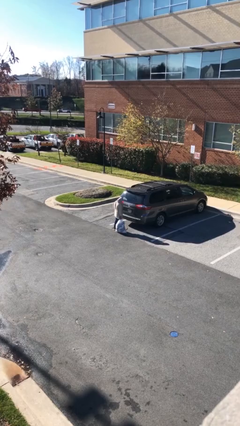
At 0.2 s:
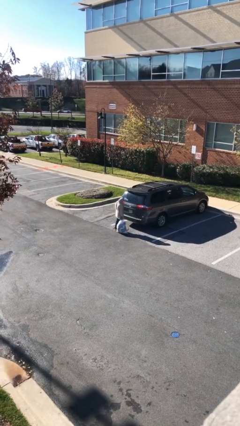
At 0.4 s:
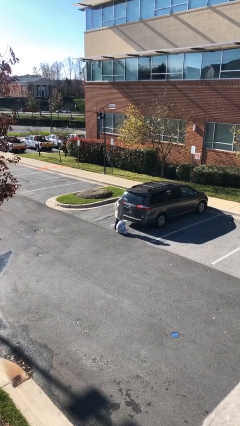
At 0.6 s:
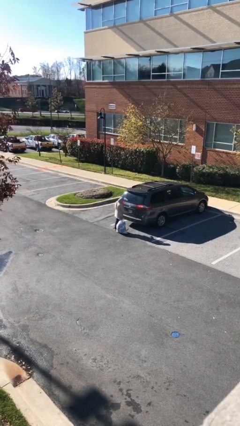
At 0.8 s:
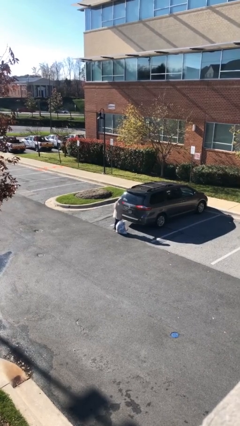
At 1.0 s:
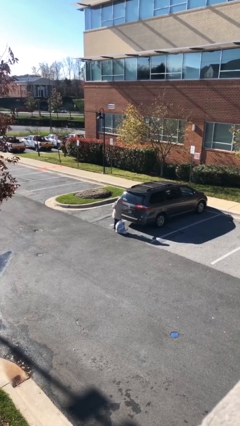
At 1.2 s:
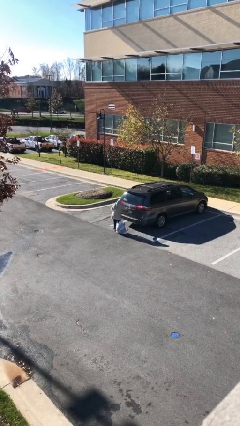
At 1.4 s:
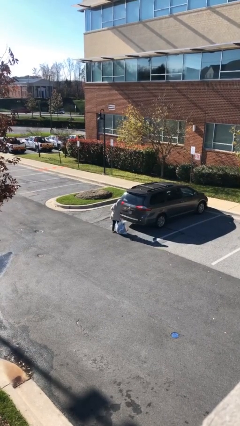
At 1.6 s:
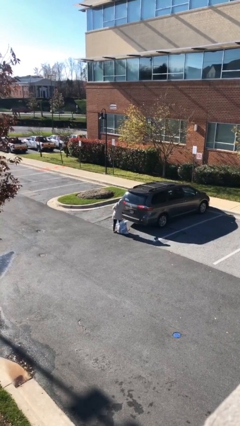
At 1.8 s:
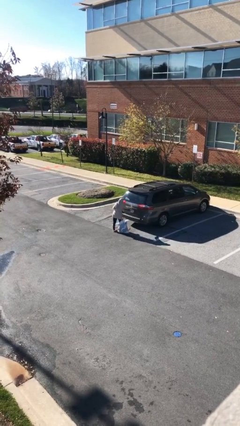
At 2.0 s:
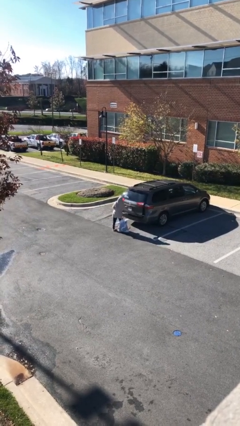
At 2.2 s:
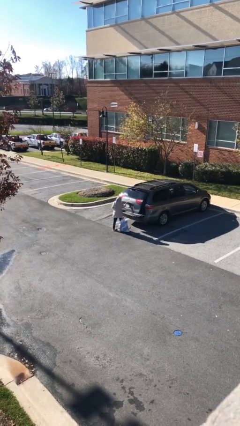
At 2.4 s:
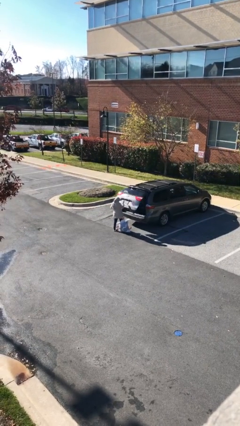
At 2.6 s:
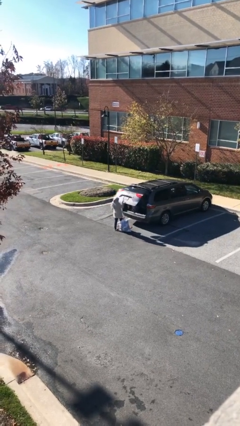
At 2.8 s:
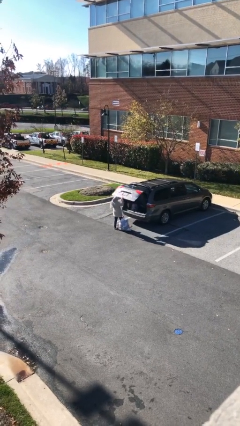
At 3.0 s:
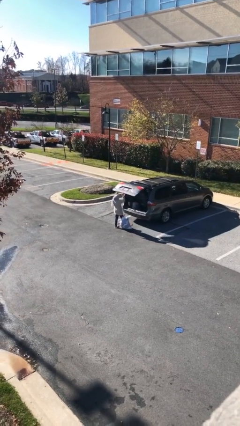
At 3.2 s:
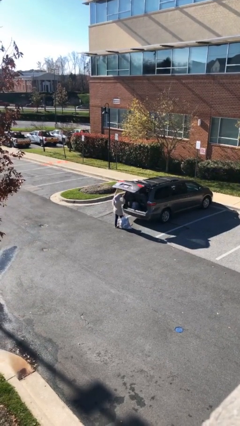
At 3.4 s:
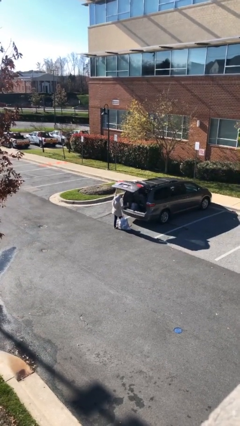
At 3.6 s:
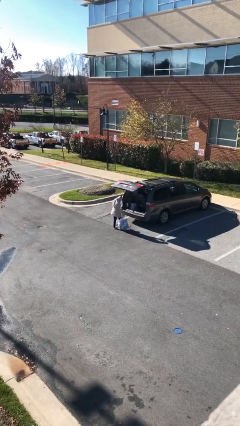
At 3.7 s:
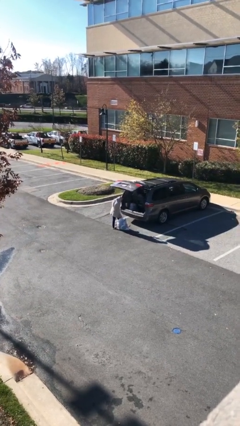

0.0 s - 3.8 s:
person opens car trunk

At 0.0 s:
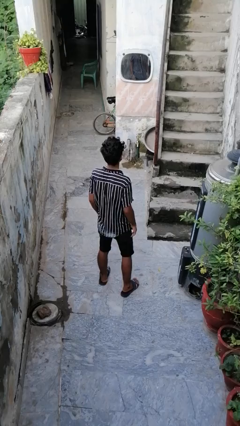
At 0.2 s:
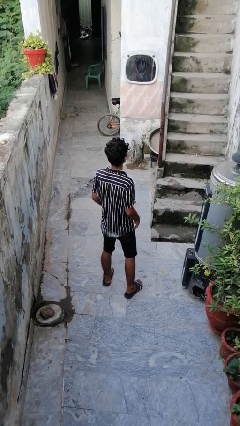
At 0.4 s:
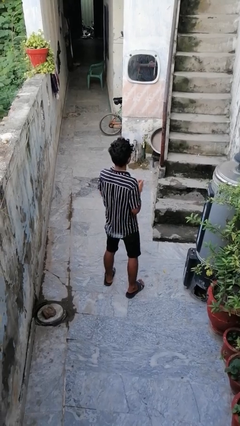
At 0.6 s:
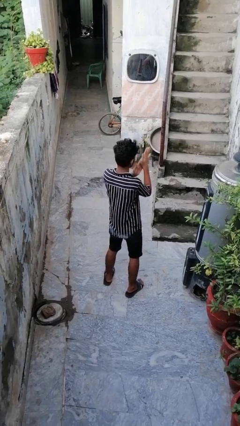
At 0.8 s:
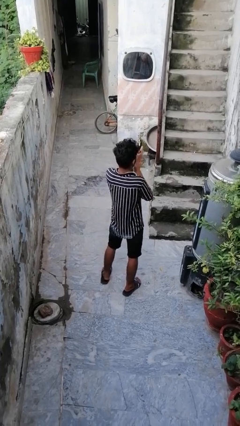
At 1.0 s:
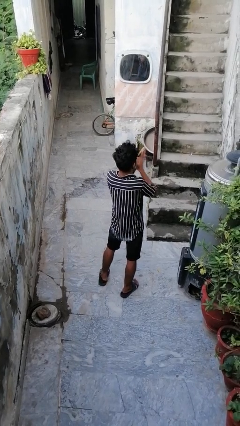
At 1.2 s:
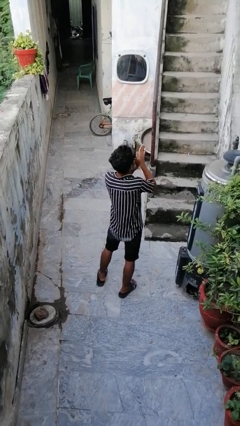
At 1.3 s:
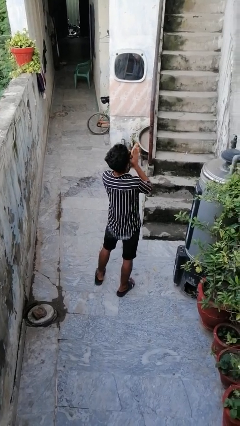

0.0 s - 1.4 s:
person blows into hands

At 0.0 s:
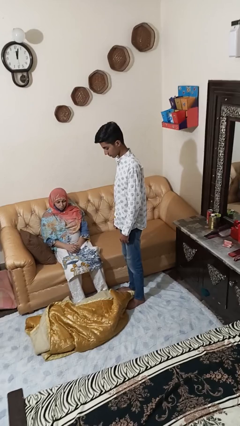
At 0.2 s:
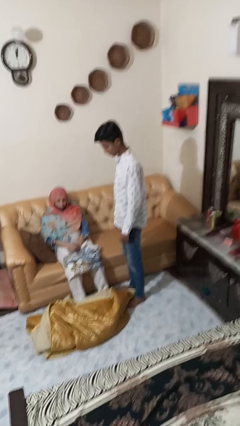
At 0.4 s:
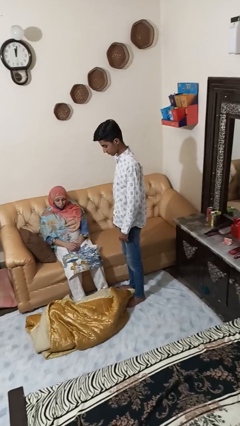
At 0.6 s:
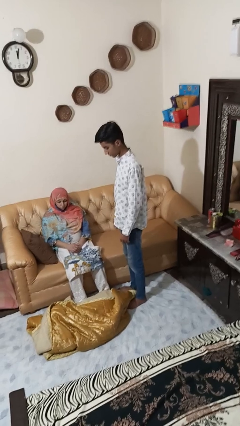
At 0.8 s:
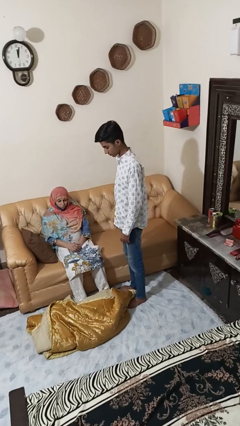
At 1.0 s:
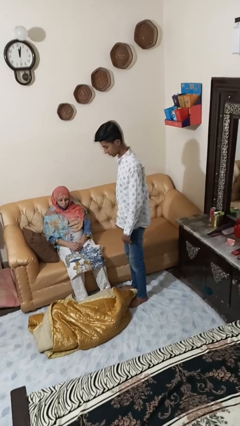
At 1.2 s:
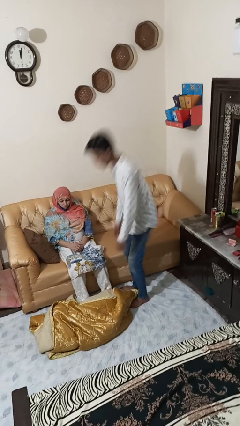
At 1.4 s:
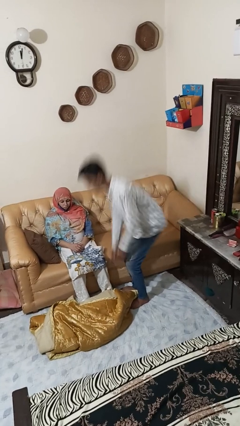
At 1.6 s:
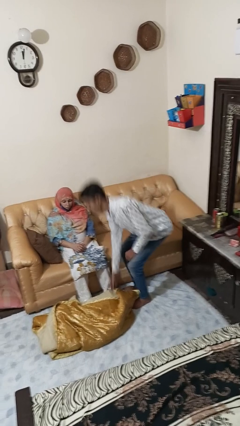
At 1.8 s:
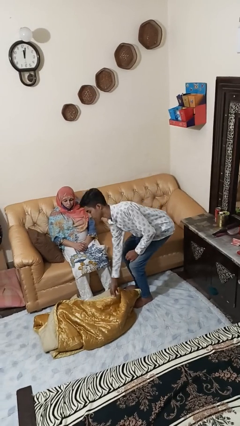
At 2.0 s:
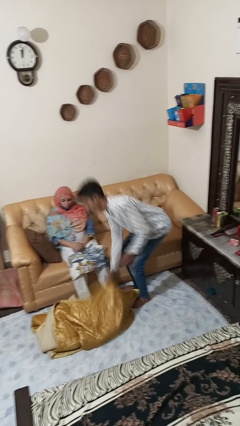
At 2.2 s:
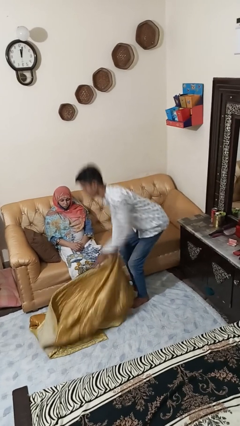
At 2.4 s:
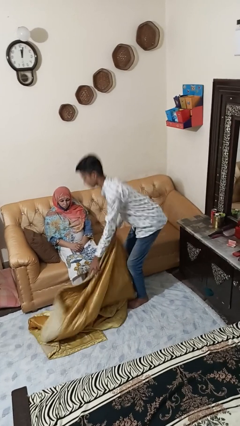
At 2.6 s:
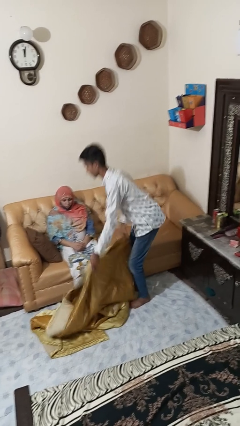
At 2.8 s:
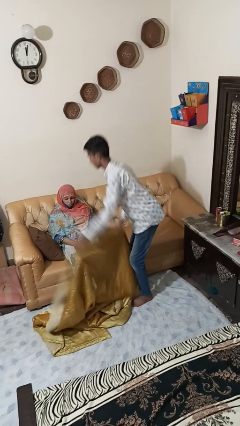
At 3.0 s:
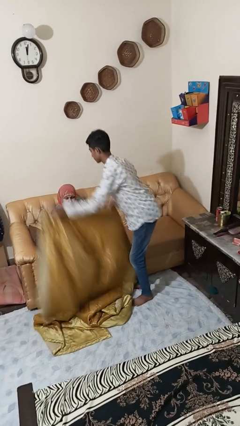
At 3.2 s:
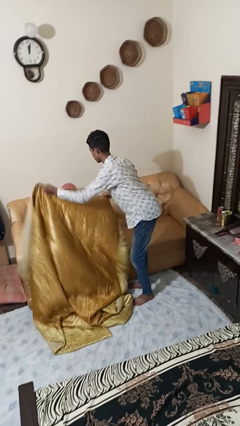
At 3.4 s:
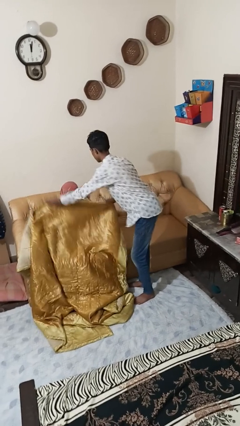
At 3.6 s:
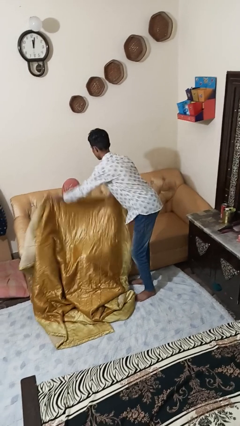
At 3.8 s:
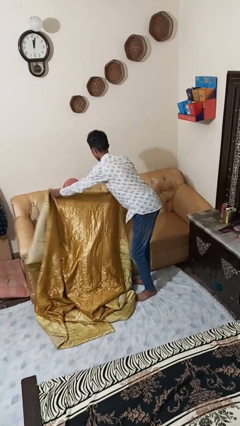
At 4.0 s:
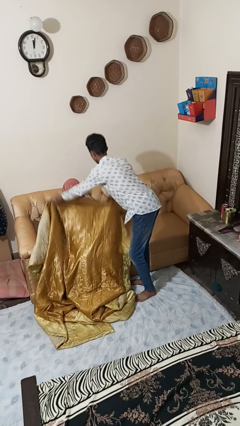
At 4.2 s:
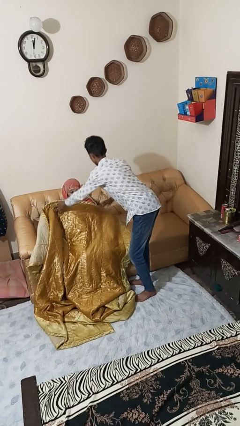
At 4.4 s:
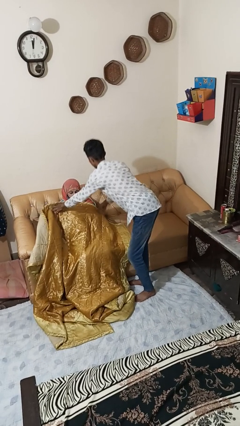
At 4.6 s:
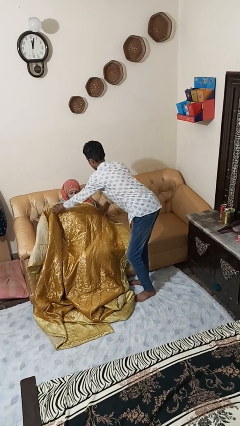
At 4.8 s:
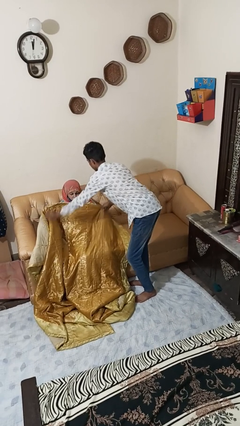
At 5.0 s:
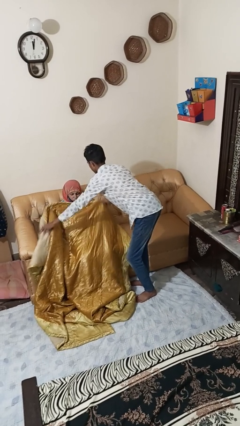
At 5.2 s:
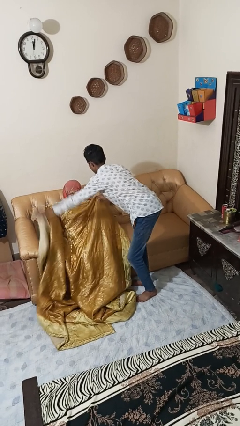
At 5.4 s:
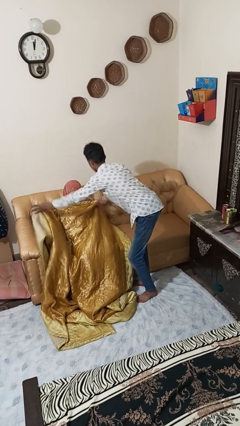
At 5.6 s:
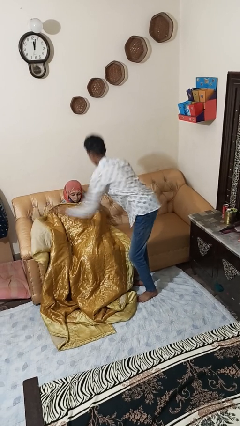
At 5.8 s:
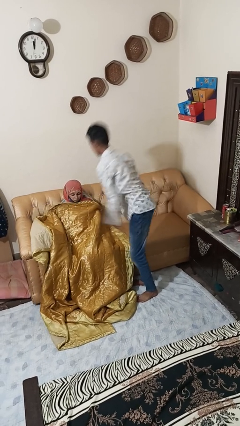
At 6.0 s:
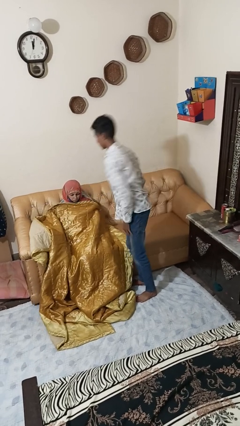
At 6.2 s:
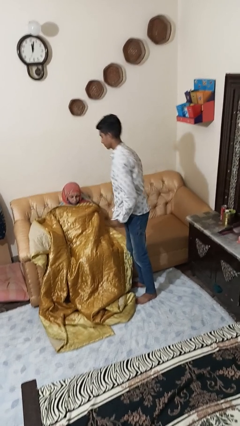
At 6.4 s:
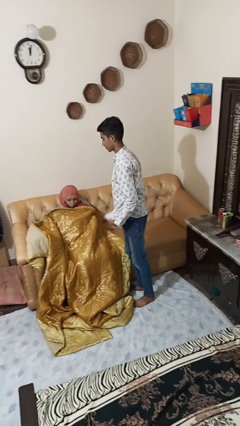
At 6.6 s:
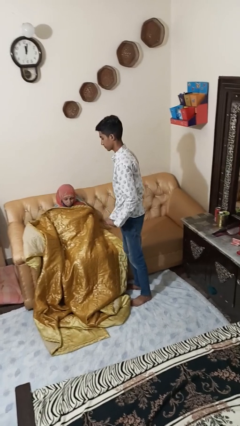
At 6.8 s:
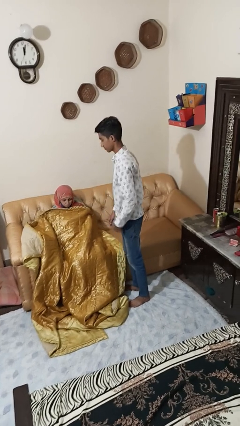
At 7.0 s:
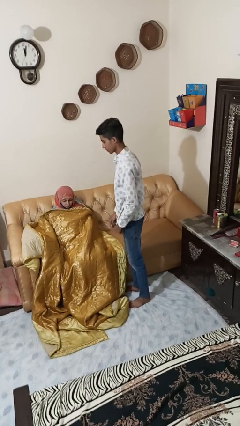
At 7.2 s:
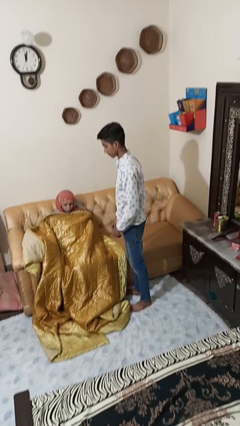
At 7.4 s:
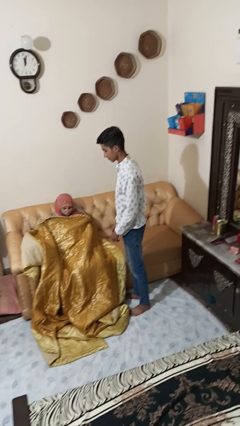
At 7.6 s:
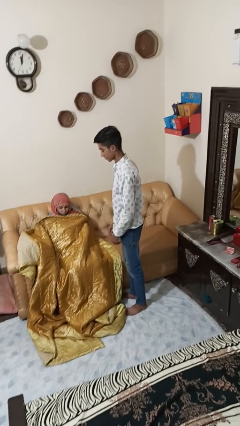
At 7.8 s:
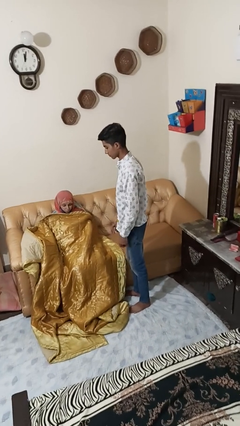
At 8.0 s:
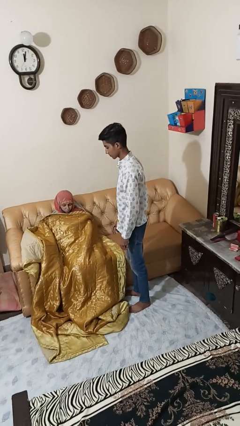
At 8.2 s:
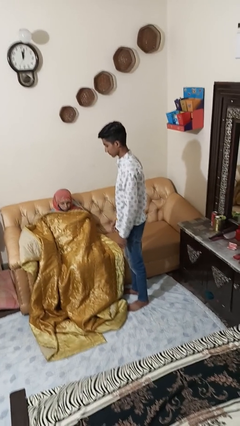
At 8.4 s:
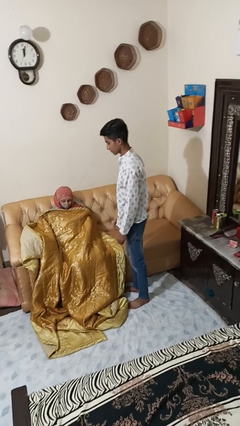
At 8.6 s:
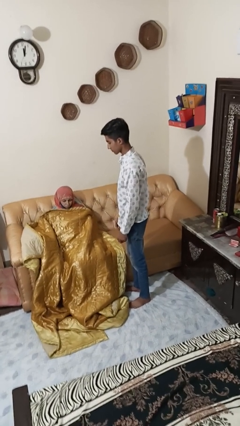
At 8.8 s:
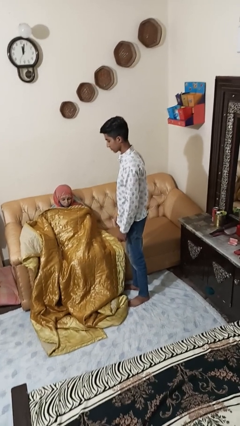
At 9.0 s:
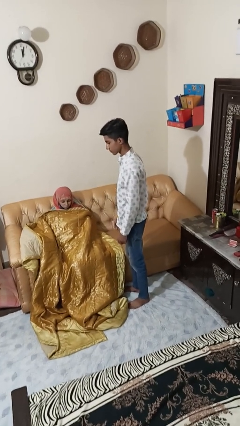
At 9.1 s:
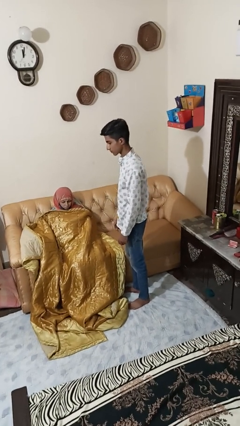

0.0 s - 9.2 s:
person covers friend with blanket

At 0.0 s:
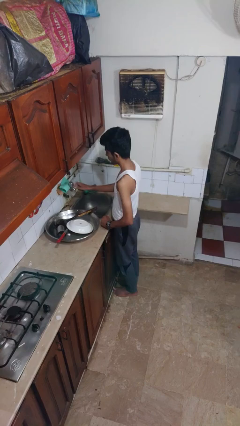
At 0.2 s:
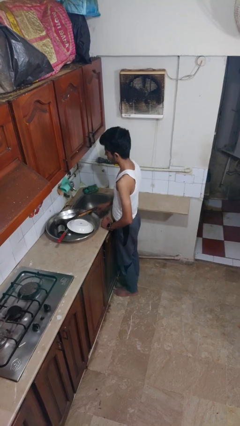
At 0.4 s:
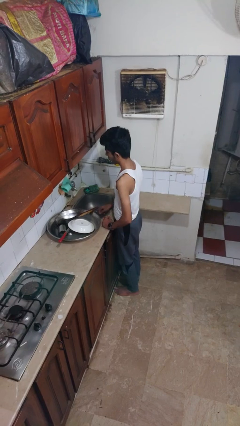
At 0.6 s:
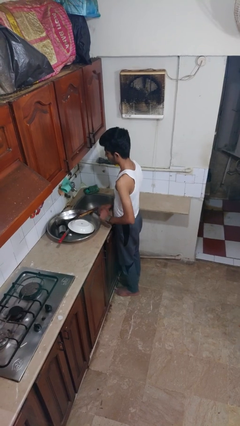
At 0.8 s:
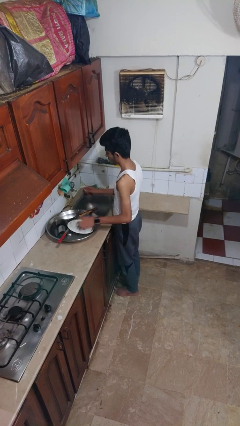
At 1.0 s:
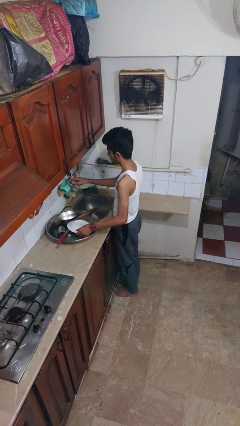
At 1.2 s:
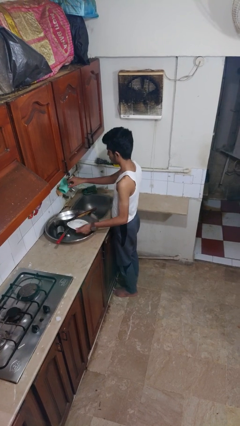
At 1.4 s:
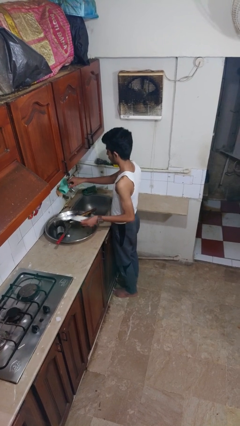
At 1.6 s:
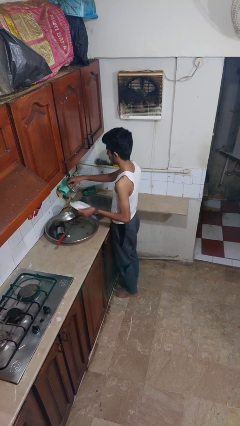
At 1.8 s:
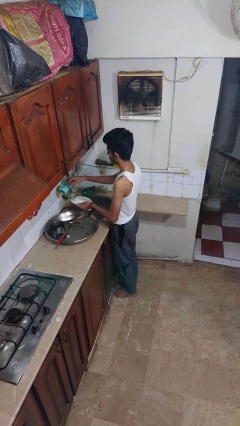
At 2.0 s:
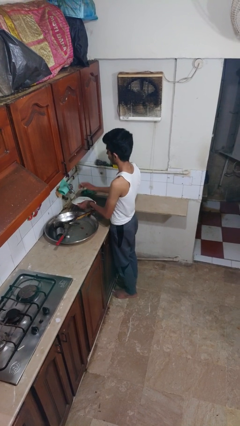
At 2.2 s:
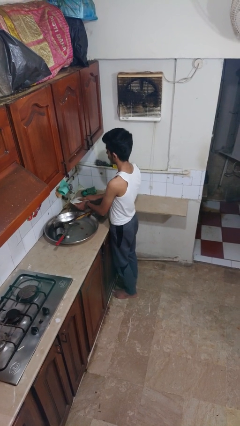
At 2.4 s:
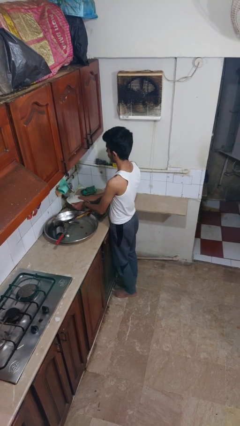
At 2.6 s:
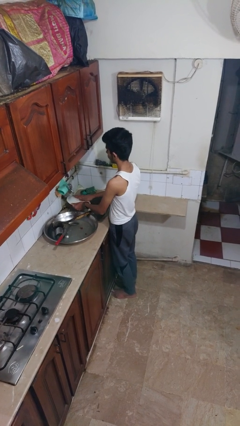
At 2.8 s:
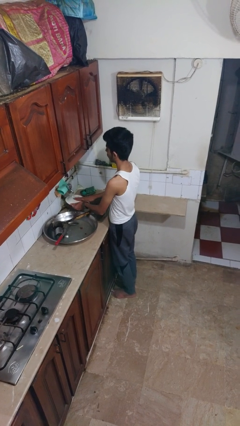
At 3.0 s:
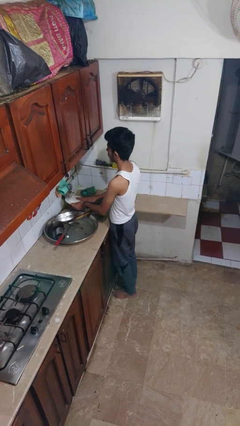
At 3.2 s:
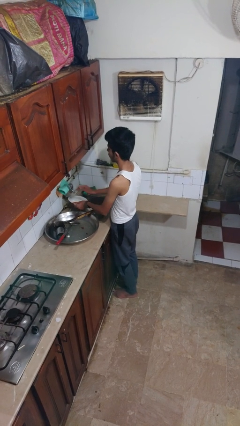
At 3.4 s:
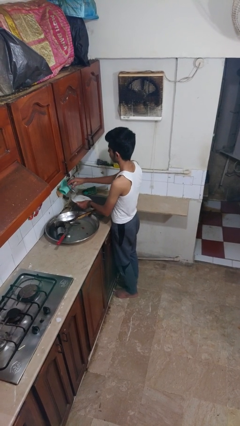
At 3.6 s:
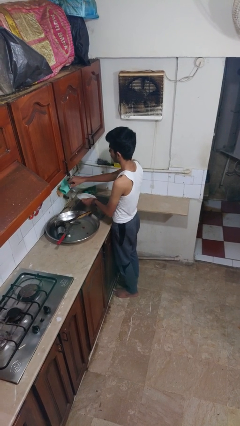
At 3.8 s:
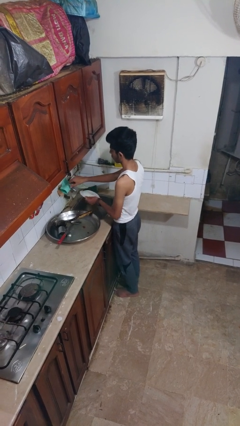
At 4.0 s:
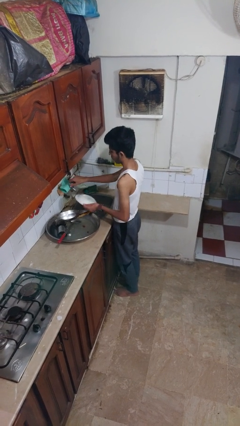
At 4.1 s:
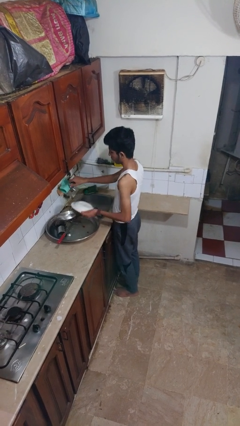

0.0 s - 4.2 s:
person washes dish
